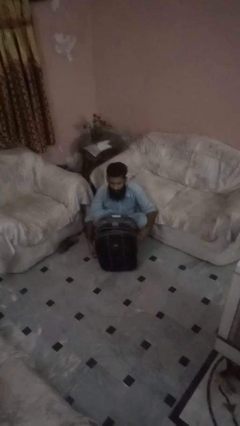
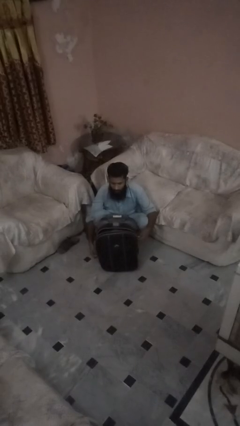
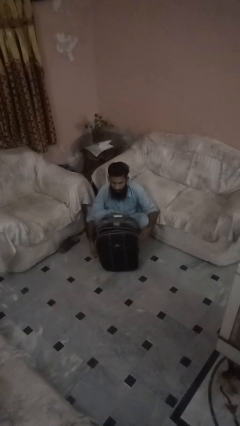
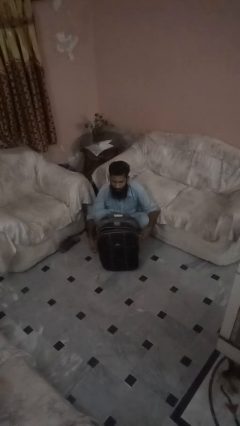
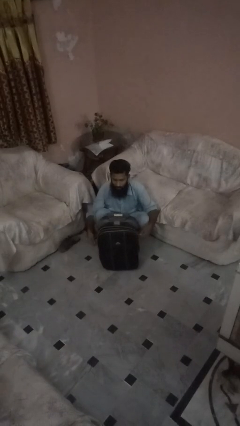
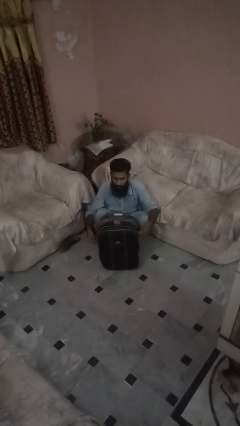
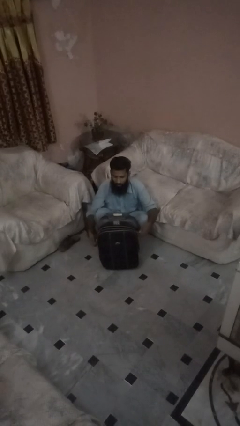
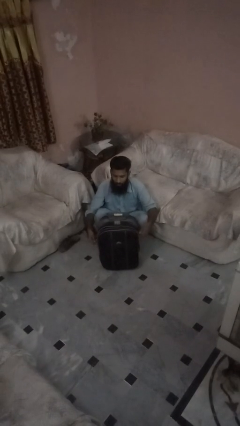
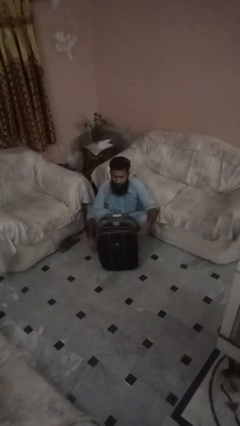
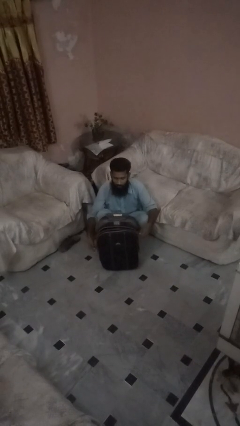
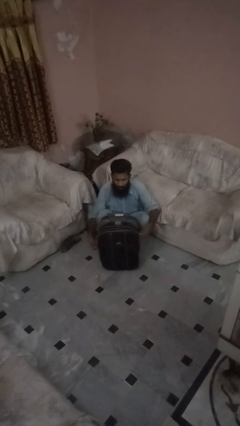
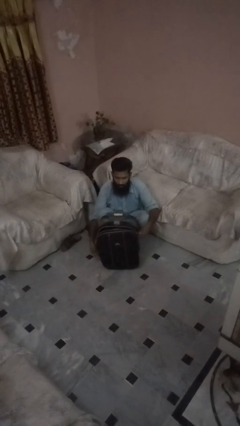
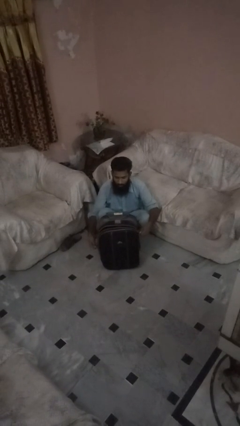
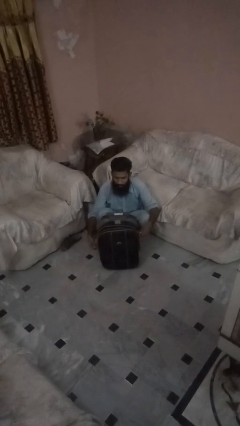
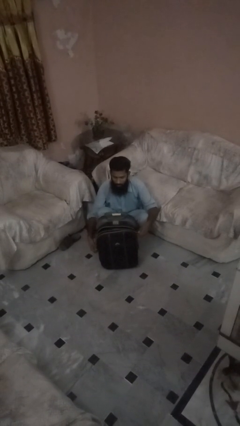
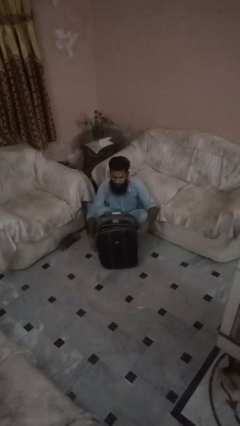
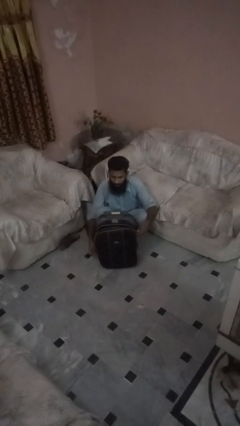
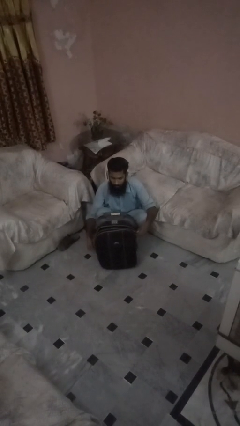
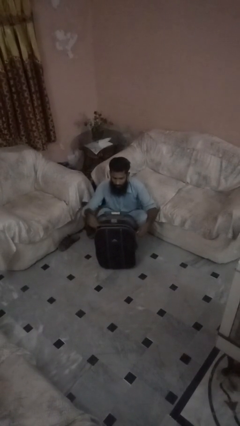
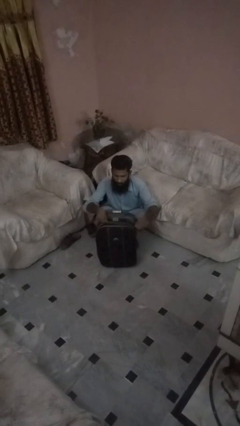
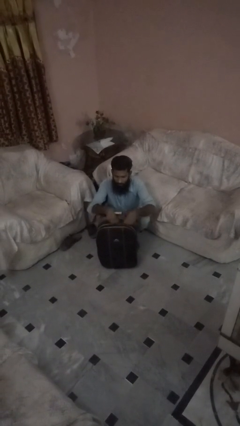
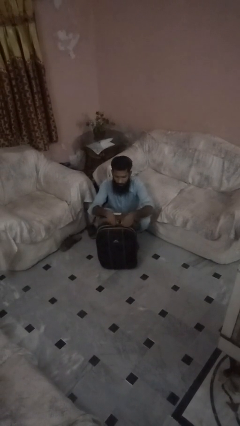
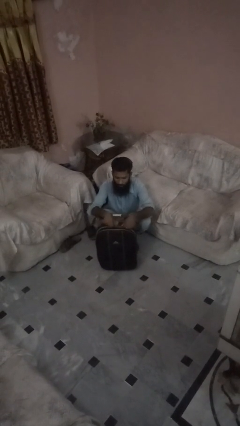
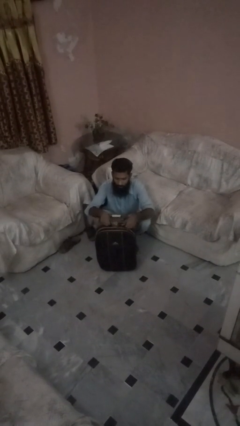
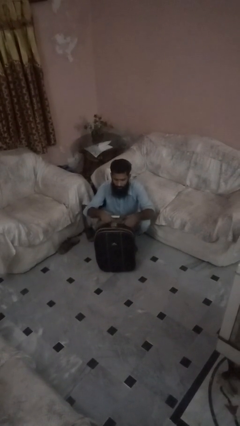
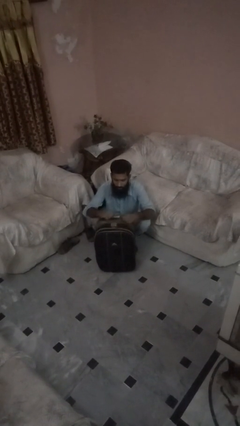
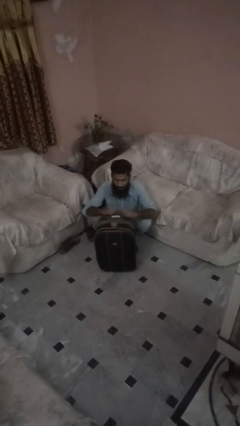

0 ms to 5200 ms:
person closes suitcase

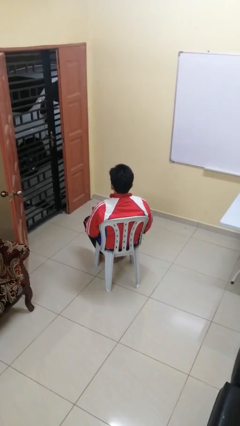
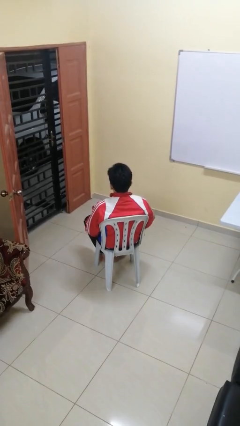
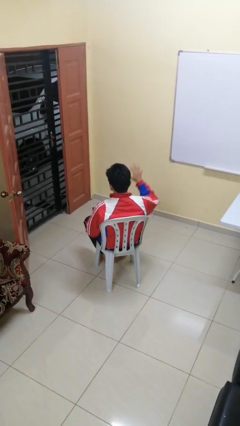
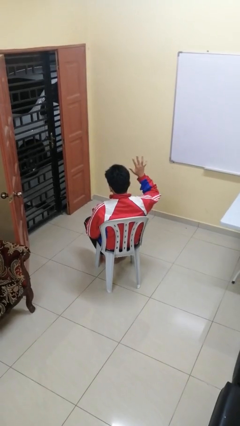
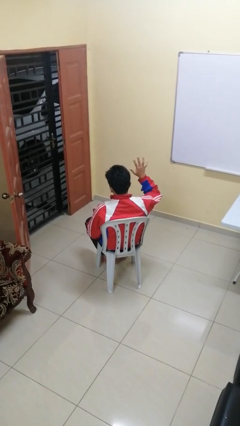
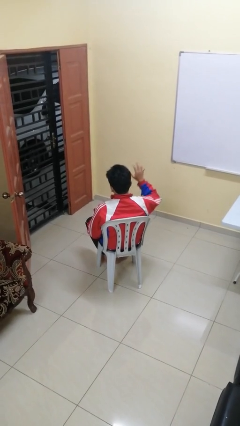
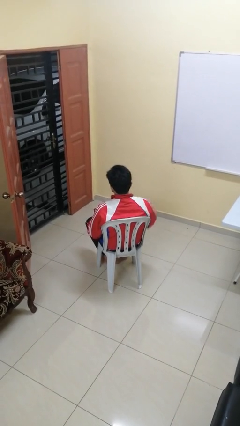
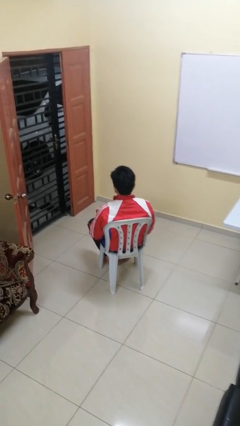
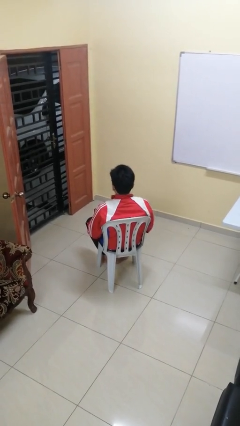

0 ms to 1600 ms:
person gestures number five

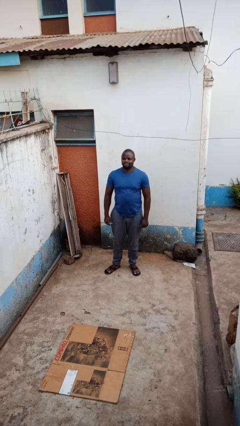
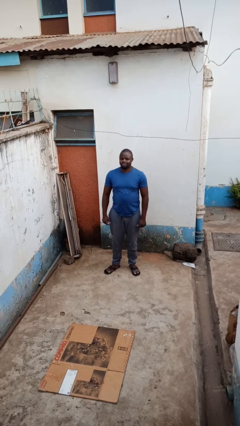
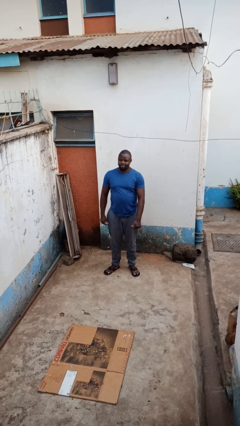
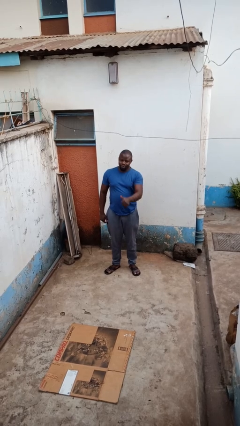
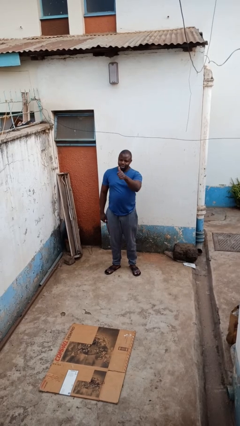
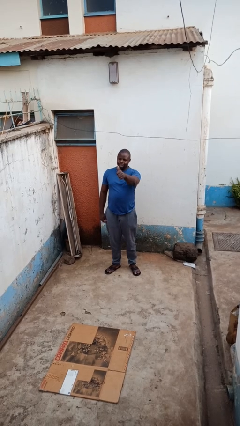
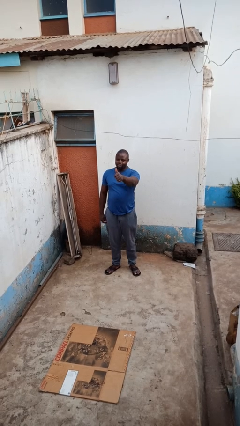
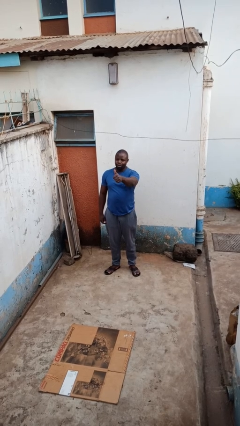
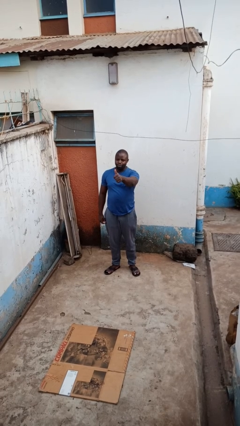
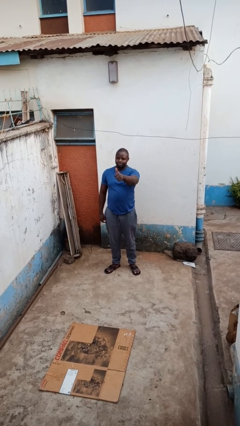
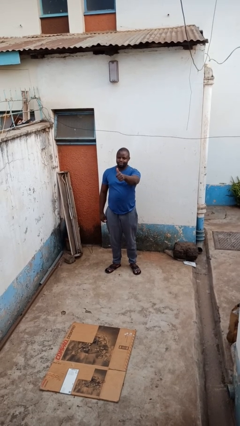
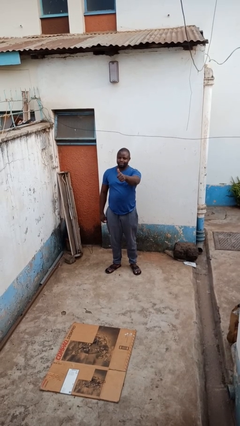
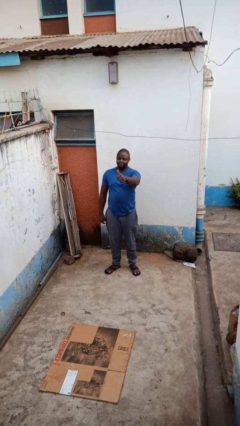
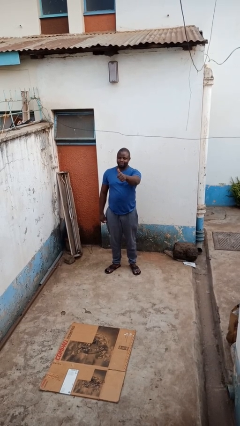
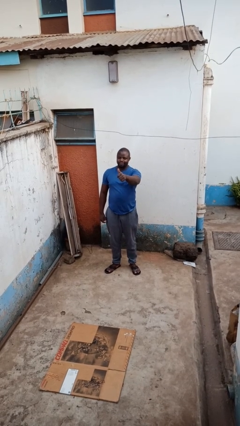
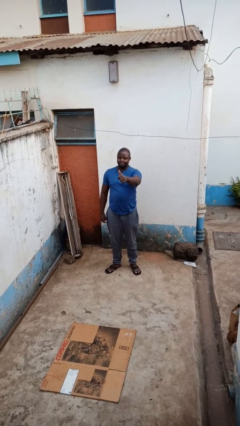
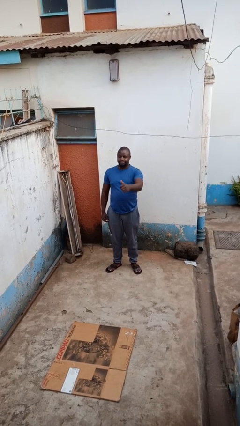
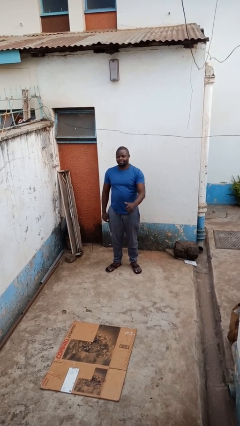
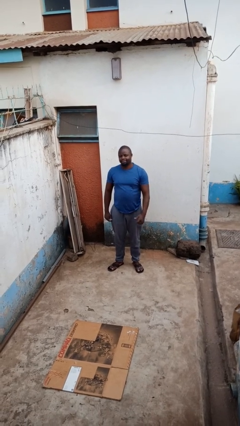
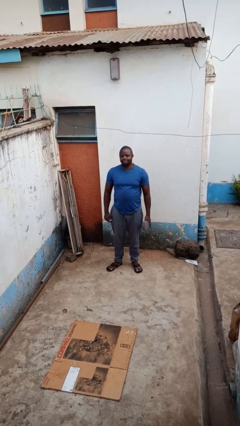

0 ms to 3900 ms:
person gestures thumbs up

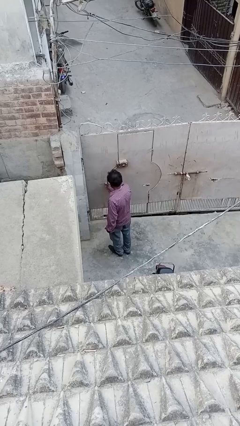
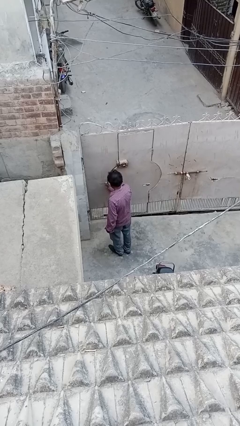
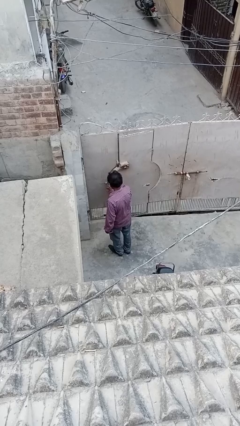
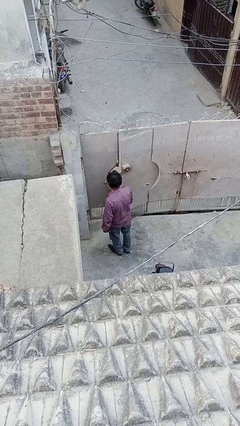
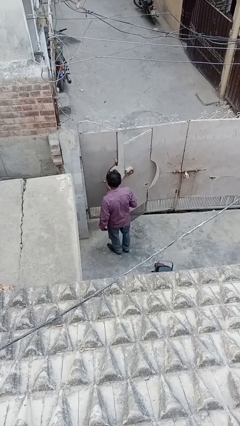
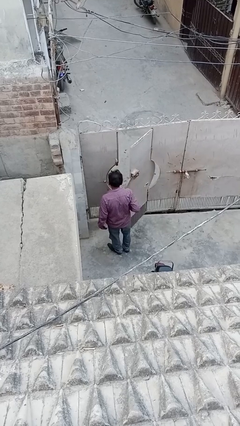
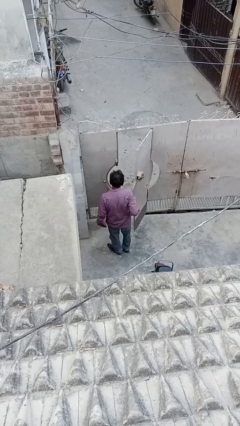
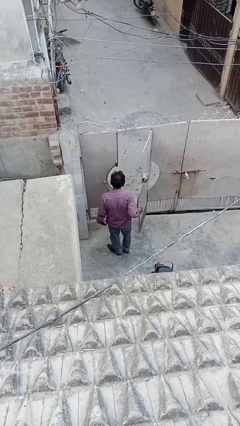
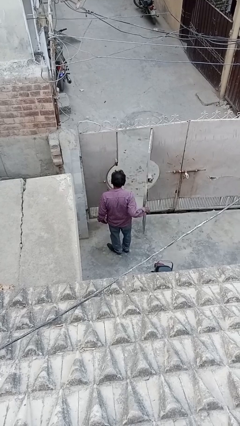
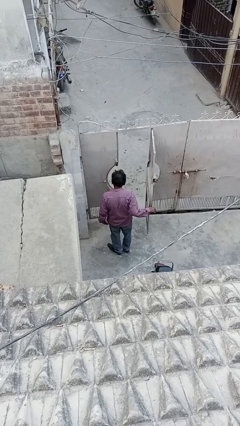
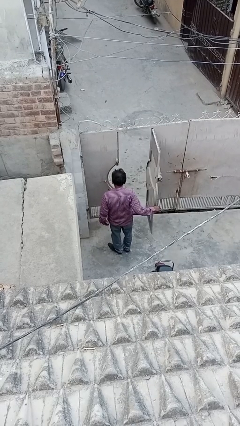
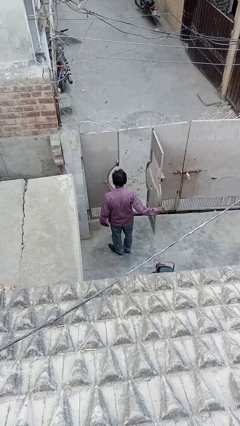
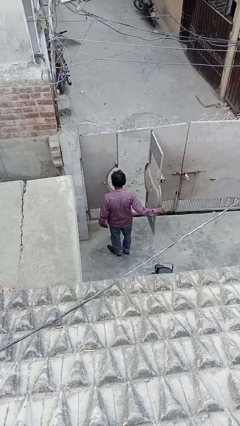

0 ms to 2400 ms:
person opens facility door

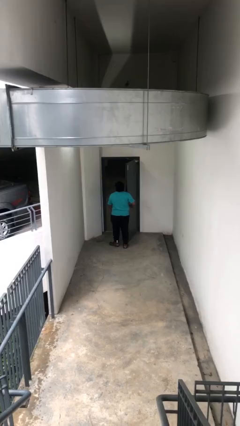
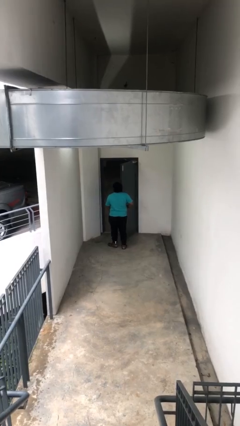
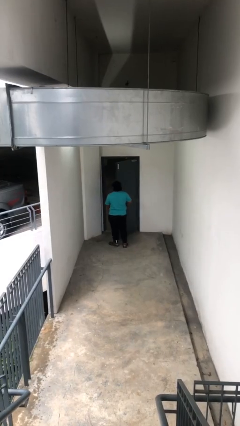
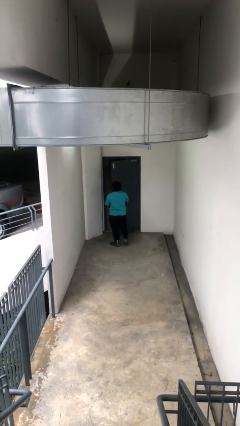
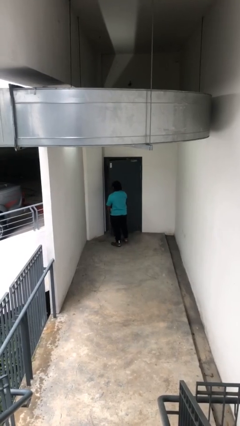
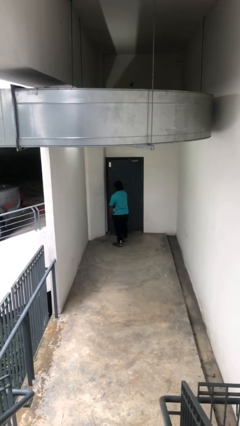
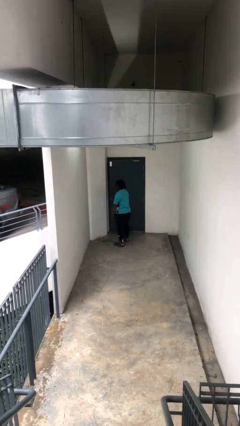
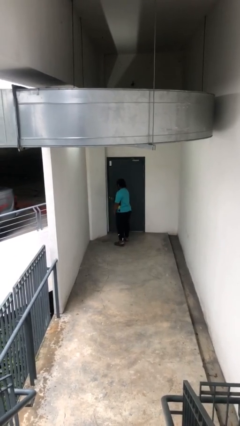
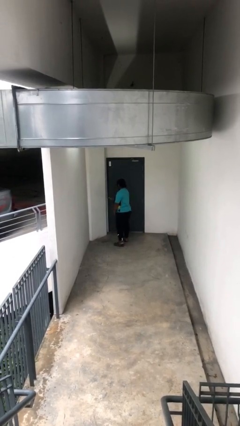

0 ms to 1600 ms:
person closes facility door

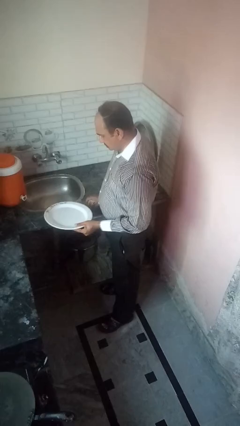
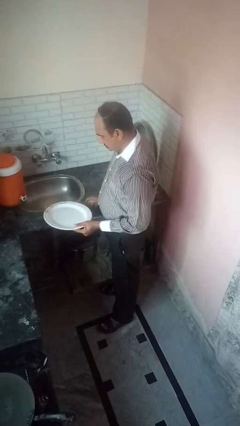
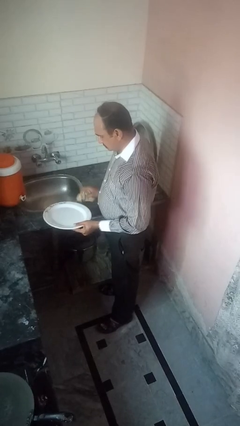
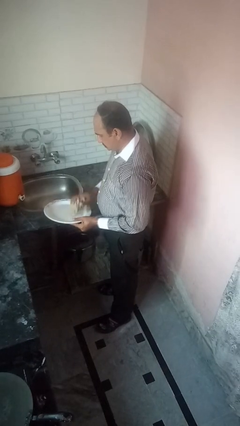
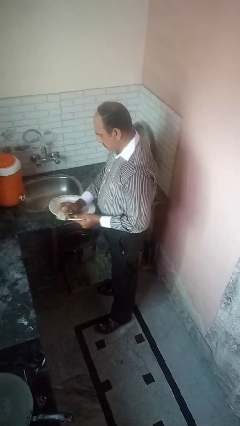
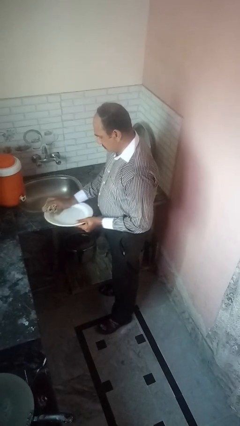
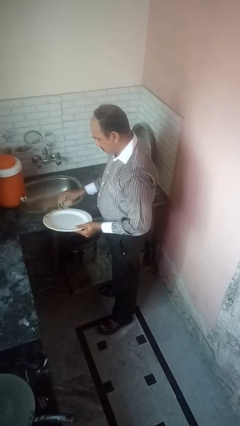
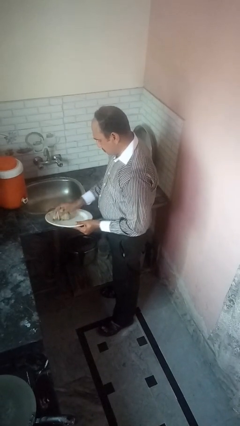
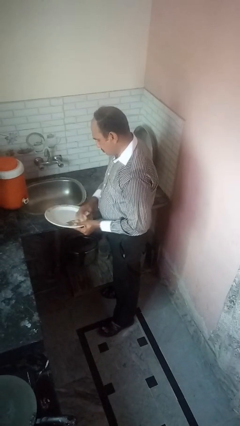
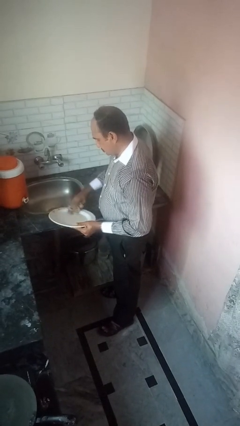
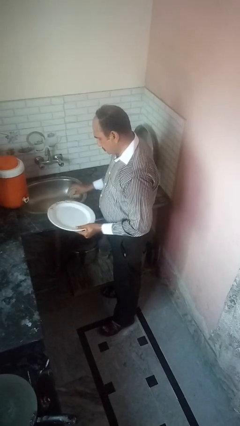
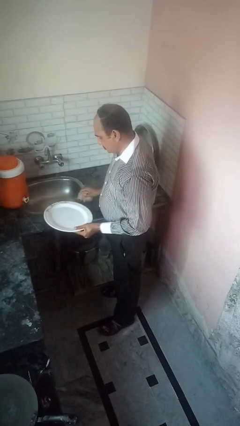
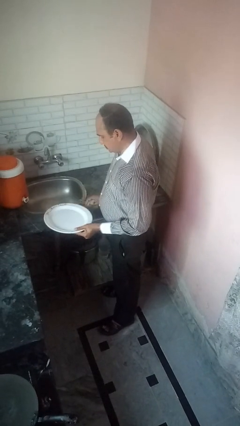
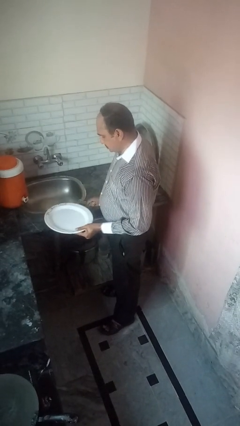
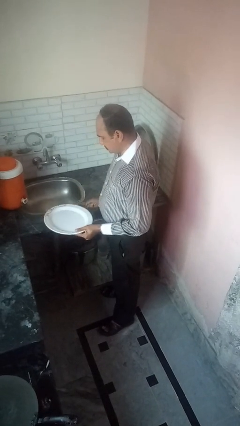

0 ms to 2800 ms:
person dries dish

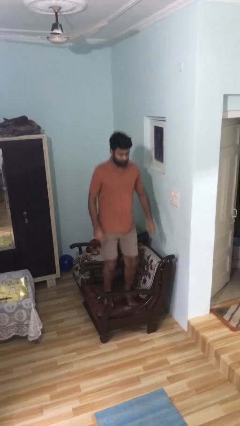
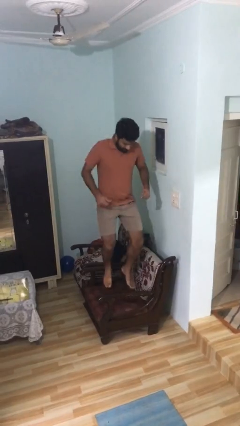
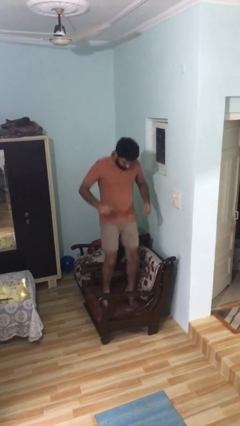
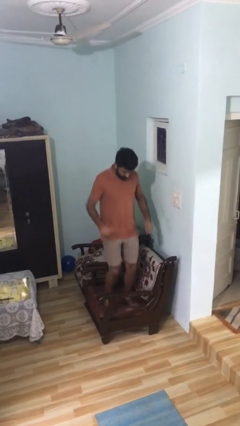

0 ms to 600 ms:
person jumps on couch
